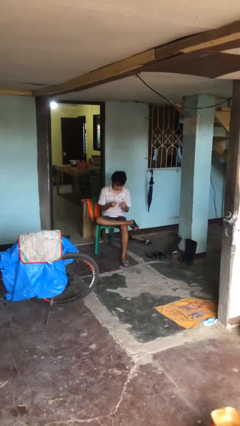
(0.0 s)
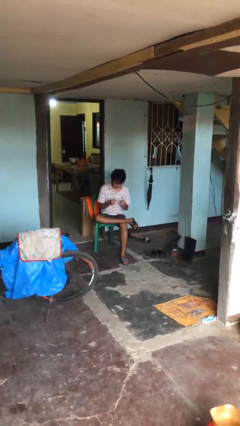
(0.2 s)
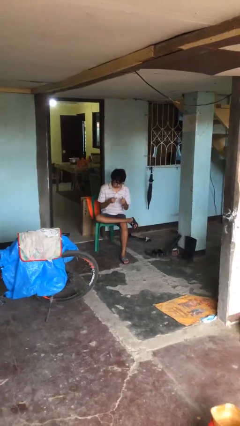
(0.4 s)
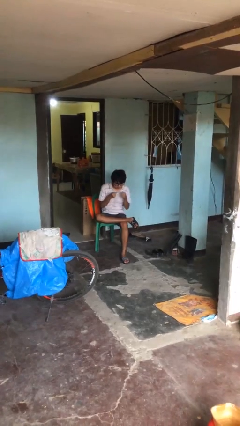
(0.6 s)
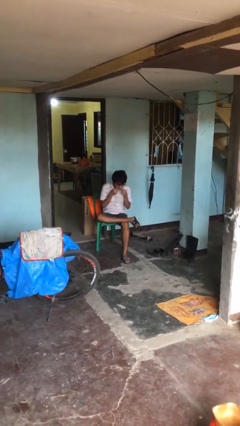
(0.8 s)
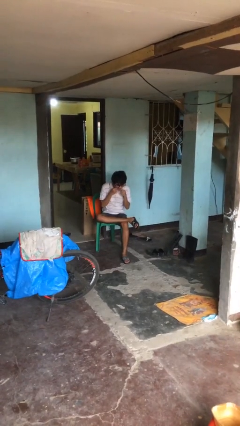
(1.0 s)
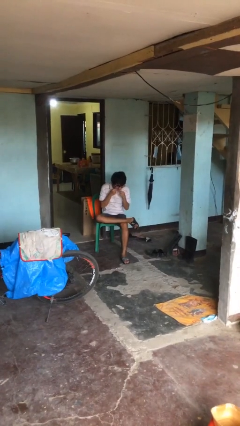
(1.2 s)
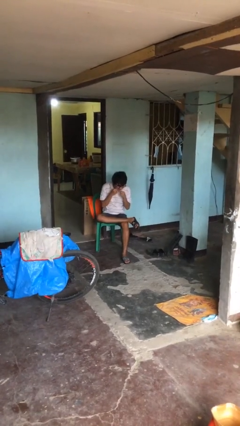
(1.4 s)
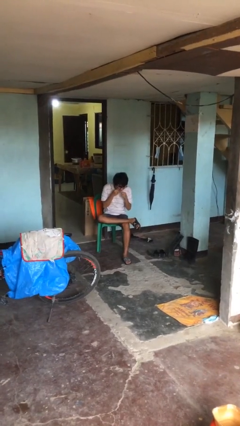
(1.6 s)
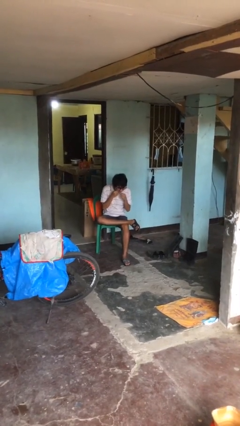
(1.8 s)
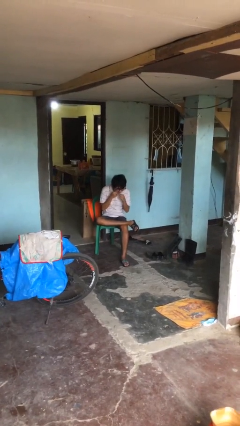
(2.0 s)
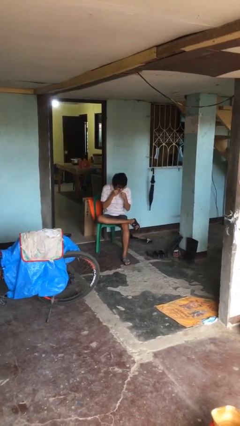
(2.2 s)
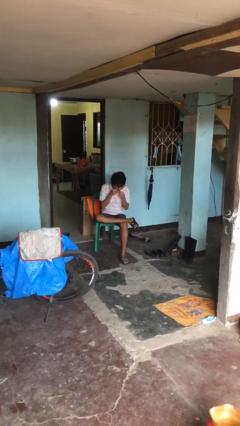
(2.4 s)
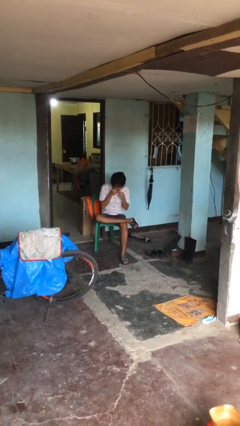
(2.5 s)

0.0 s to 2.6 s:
person flosses

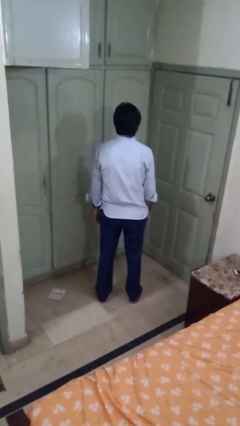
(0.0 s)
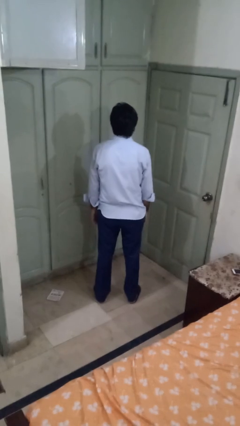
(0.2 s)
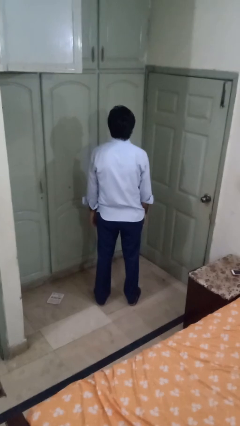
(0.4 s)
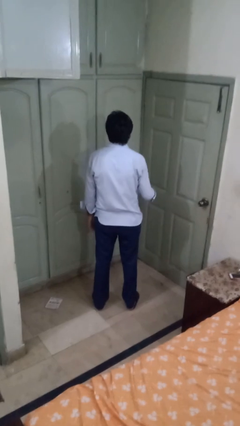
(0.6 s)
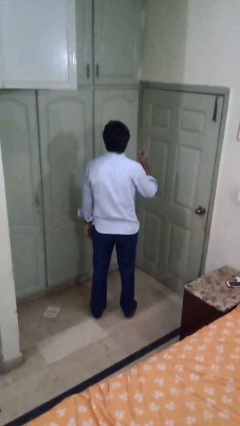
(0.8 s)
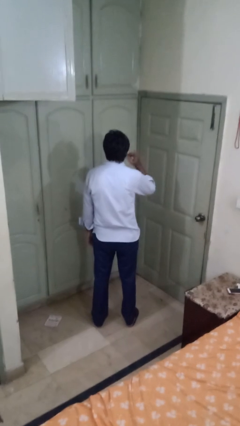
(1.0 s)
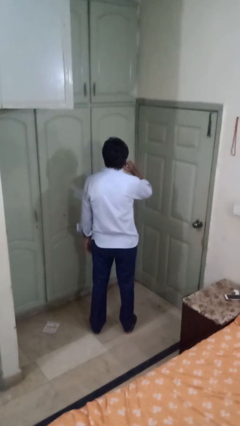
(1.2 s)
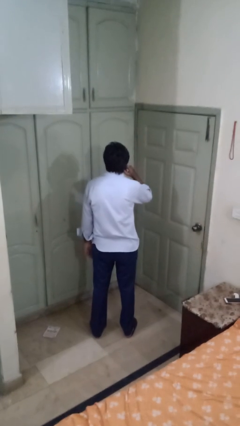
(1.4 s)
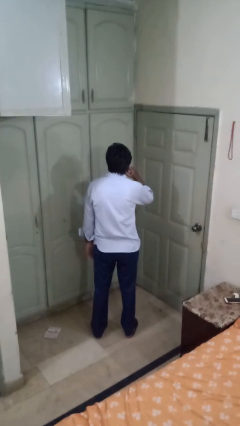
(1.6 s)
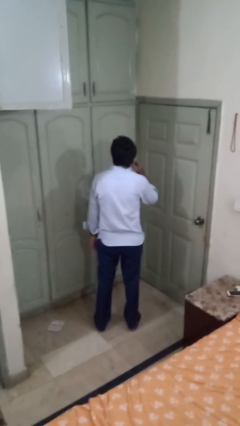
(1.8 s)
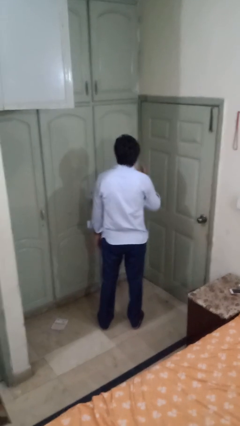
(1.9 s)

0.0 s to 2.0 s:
person gestures listen closely

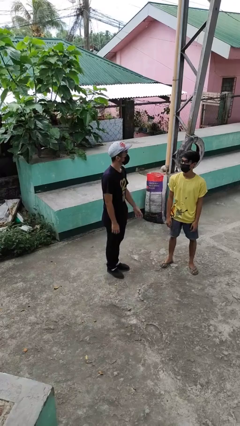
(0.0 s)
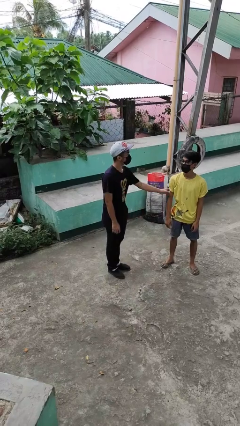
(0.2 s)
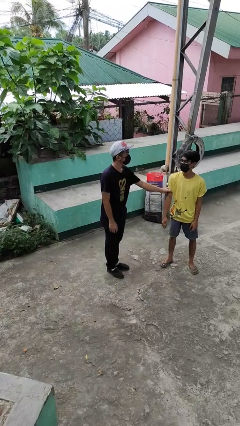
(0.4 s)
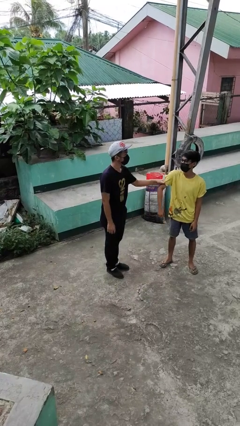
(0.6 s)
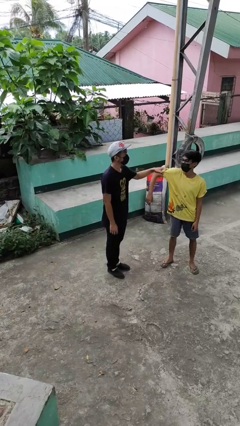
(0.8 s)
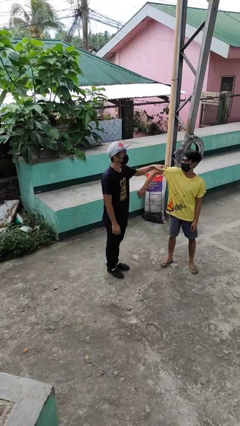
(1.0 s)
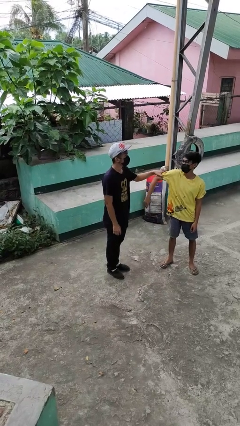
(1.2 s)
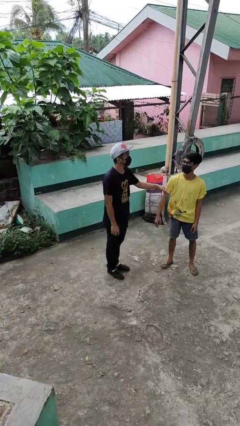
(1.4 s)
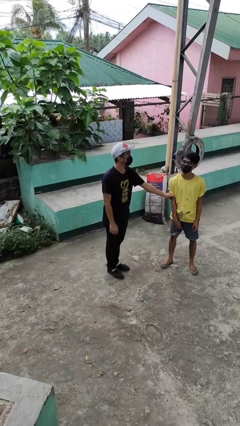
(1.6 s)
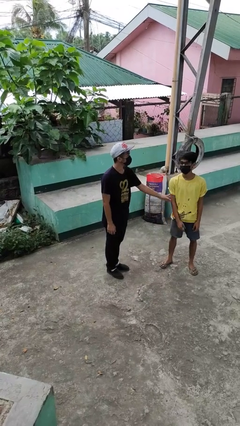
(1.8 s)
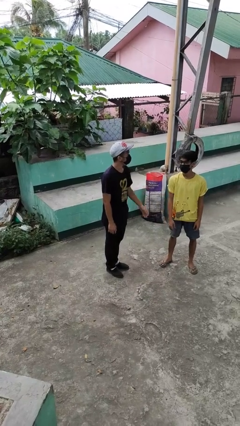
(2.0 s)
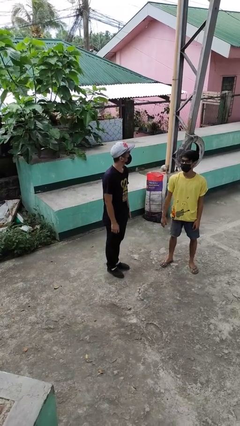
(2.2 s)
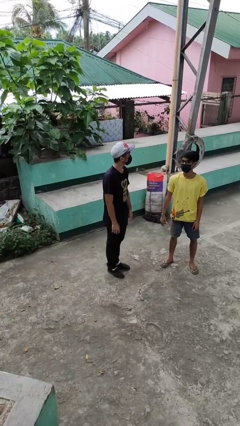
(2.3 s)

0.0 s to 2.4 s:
person grabs person by bicep

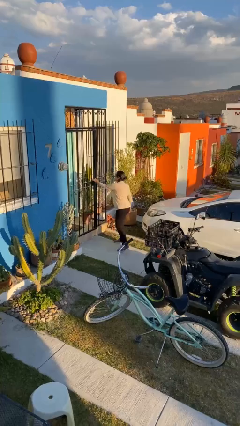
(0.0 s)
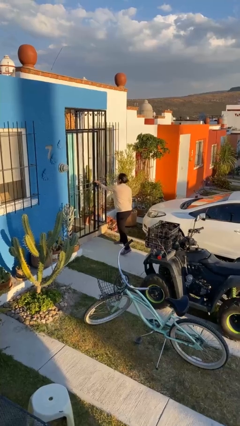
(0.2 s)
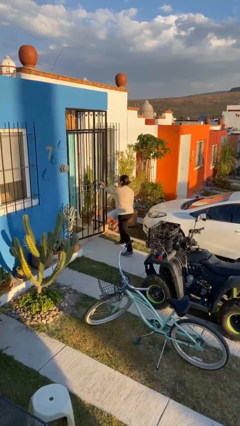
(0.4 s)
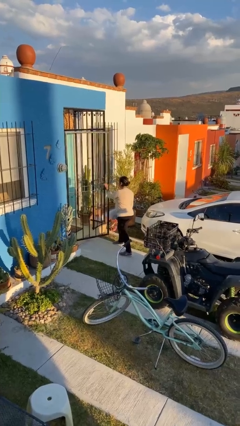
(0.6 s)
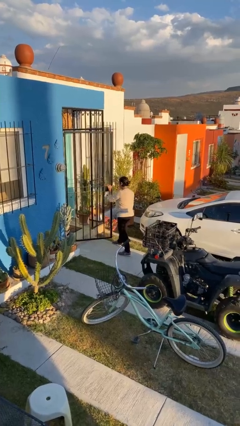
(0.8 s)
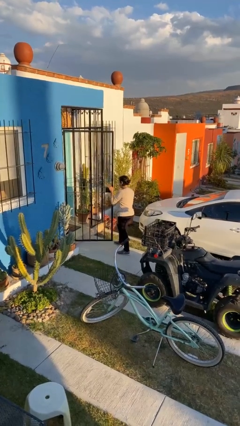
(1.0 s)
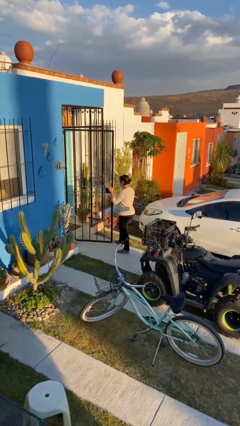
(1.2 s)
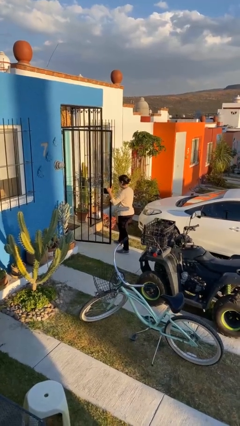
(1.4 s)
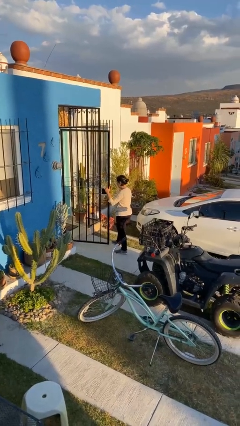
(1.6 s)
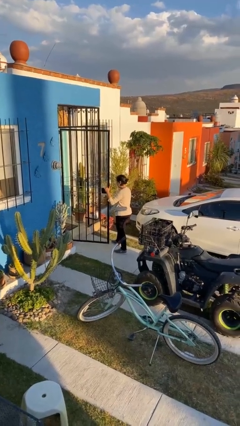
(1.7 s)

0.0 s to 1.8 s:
person opens facility door

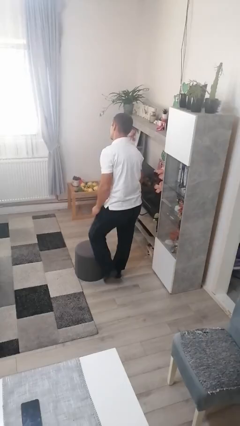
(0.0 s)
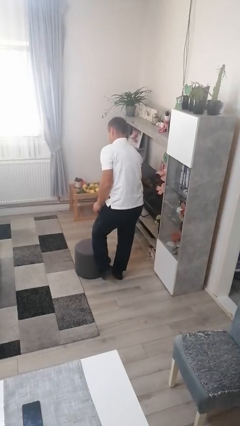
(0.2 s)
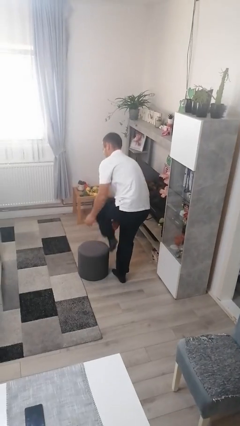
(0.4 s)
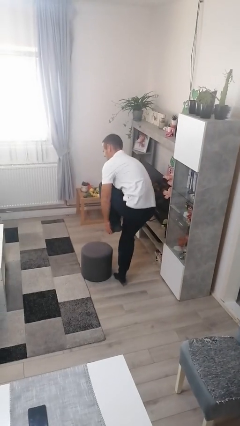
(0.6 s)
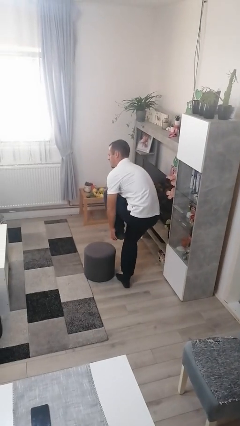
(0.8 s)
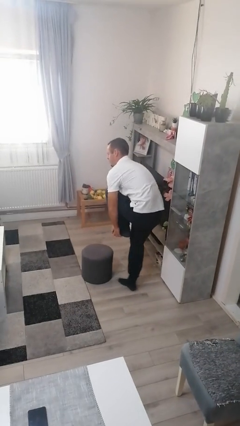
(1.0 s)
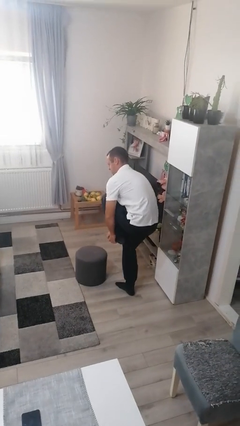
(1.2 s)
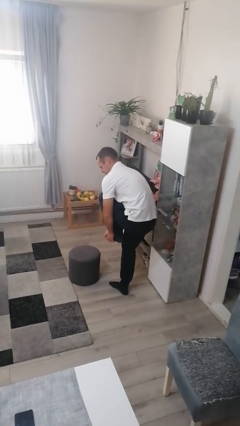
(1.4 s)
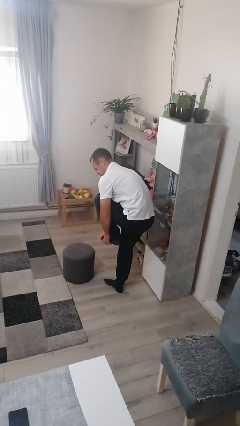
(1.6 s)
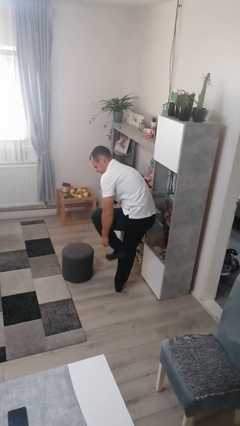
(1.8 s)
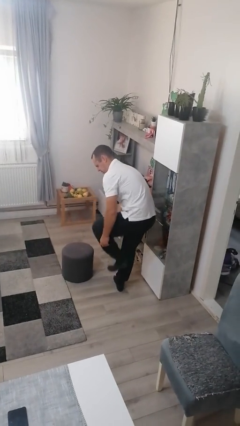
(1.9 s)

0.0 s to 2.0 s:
person stubs toe

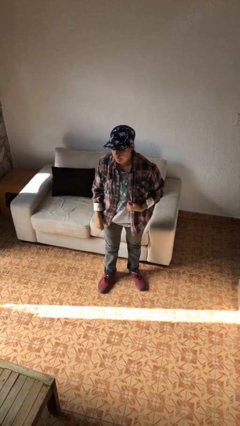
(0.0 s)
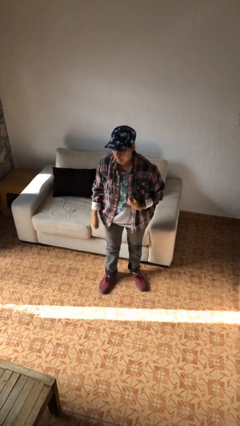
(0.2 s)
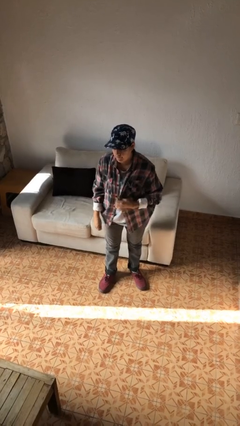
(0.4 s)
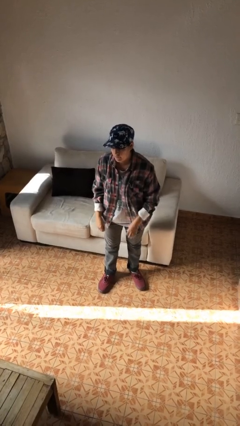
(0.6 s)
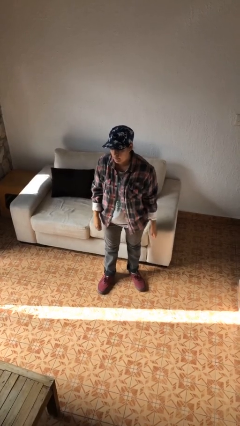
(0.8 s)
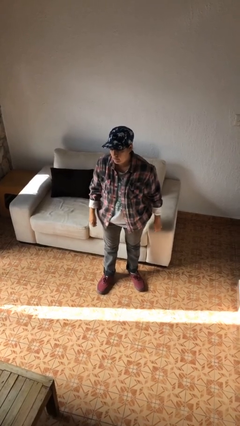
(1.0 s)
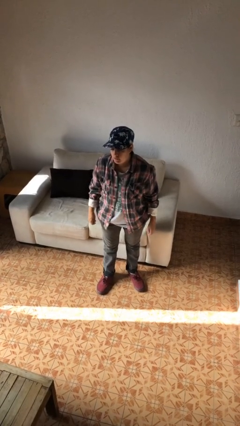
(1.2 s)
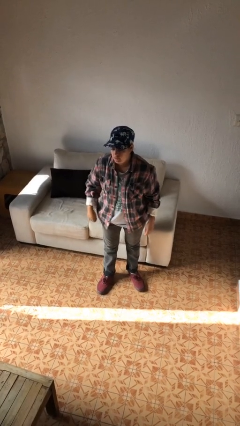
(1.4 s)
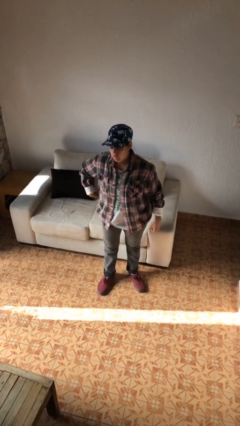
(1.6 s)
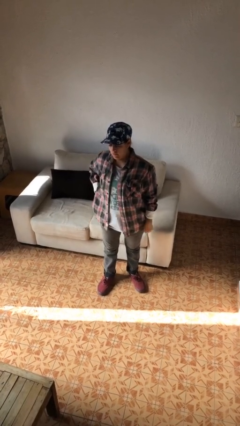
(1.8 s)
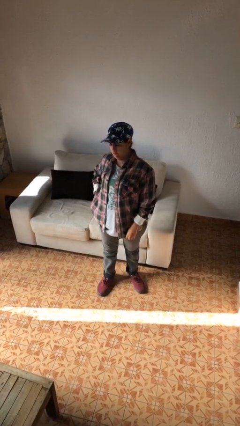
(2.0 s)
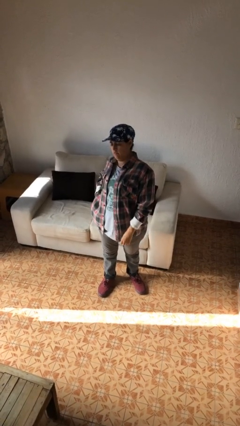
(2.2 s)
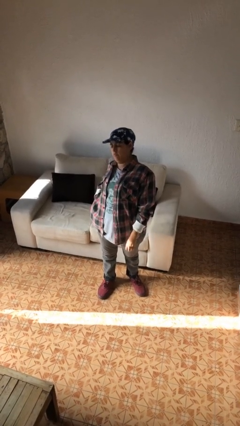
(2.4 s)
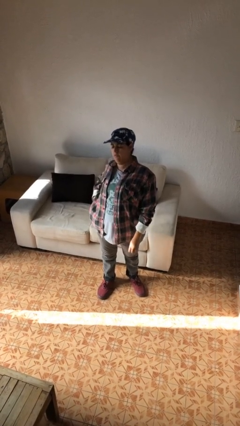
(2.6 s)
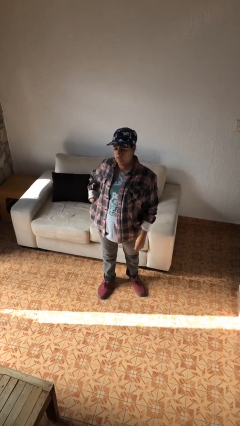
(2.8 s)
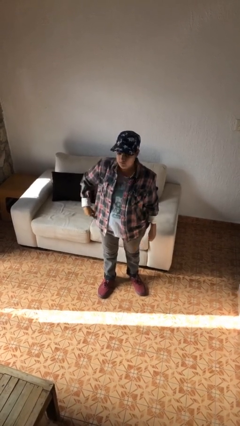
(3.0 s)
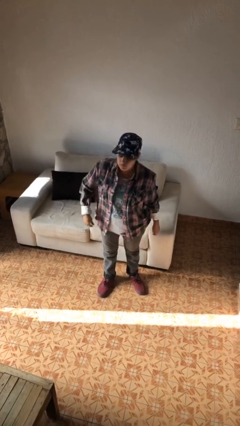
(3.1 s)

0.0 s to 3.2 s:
person stretches back

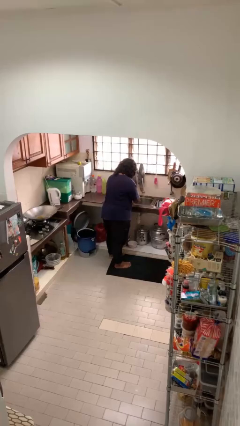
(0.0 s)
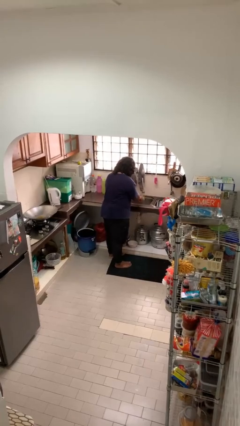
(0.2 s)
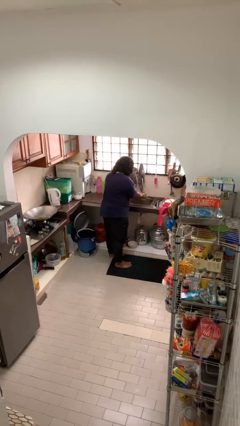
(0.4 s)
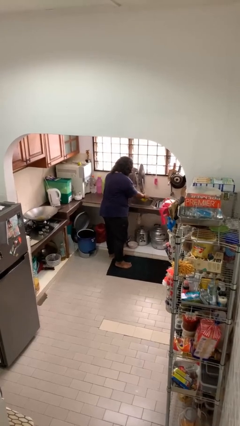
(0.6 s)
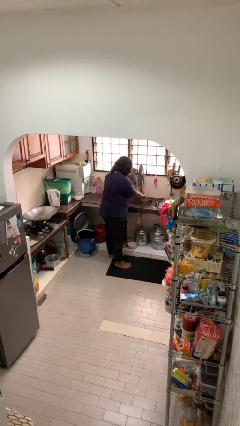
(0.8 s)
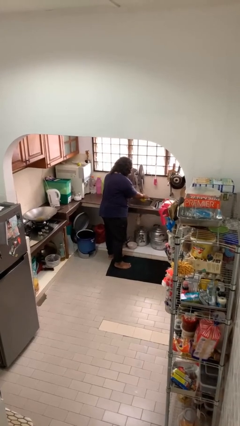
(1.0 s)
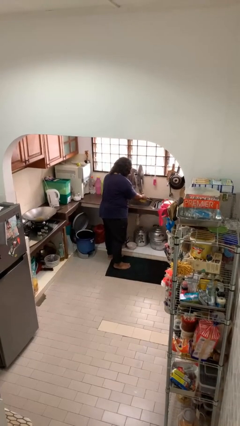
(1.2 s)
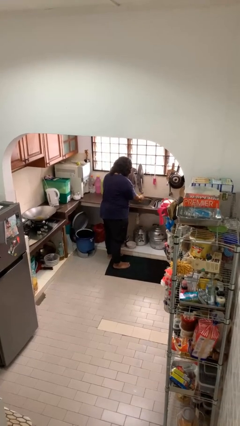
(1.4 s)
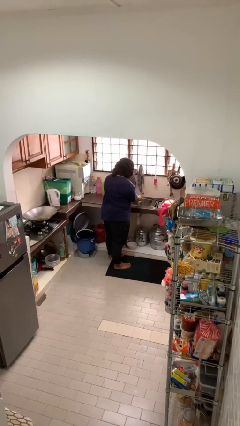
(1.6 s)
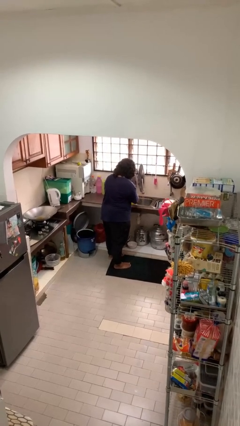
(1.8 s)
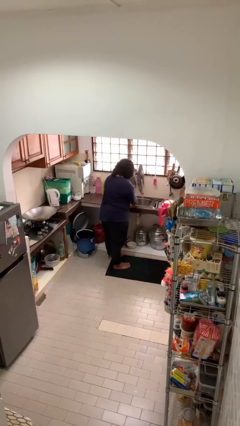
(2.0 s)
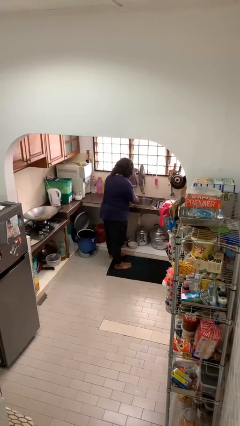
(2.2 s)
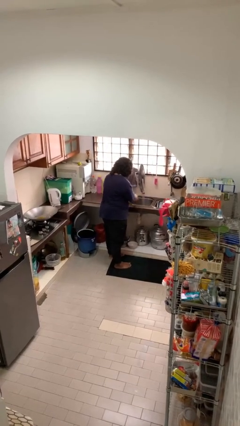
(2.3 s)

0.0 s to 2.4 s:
person washes dish

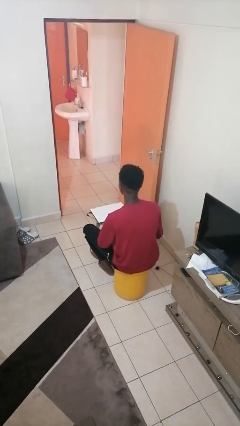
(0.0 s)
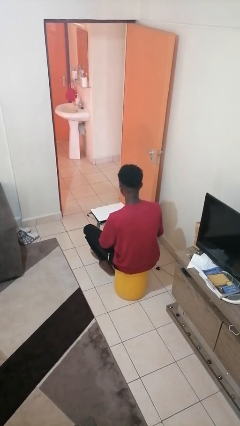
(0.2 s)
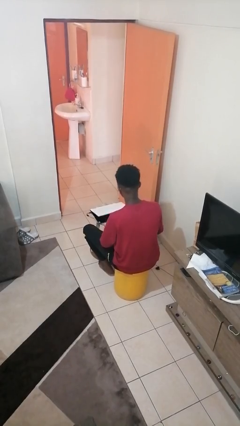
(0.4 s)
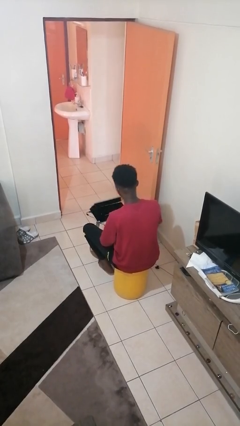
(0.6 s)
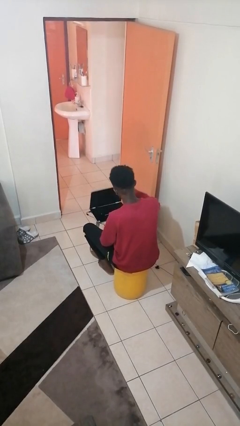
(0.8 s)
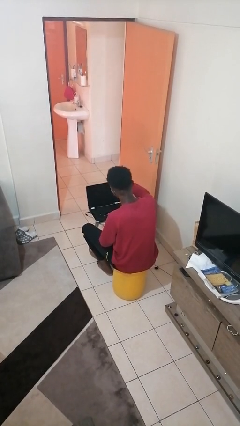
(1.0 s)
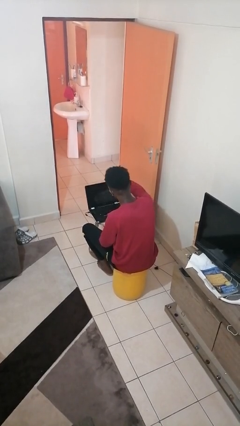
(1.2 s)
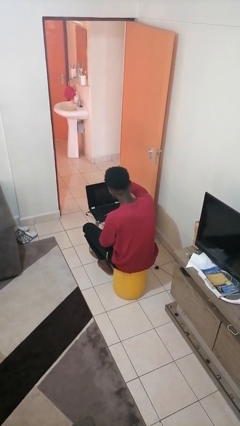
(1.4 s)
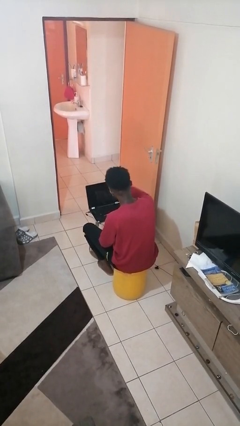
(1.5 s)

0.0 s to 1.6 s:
person opens laptop